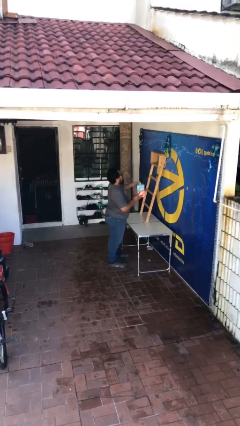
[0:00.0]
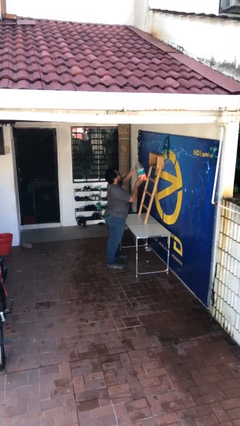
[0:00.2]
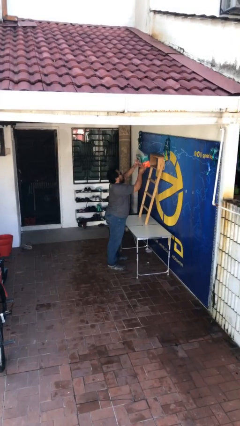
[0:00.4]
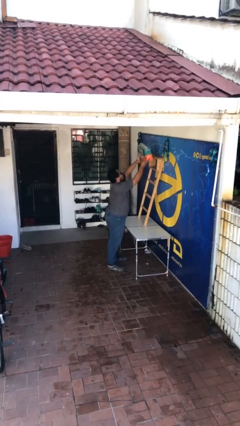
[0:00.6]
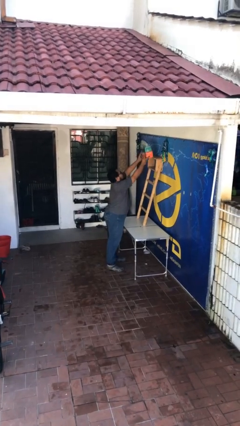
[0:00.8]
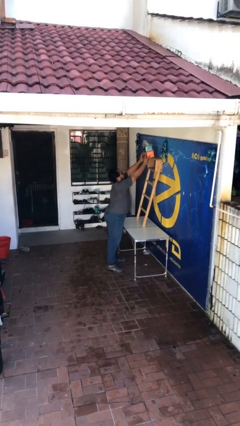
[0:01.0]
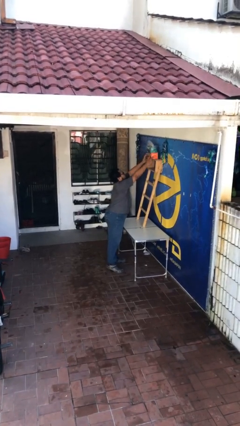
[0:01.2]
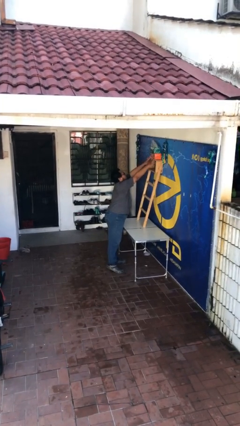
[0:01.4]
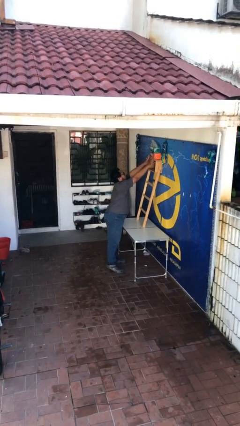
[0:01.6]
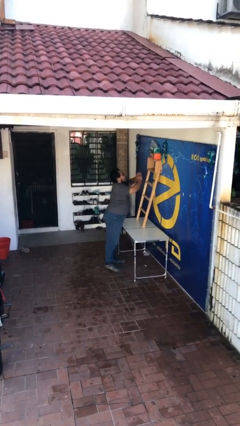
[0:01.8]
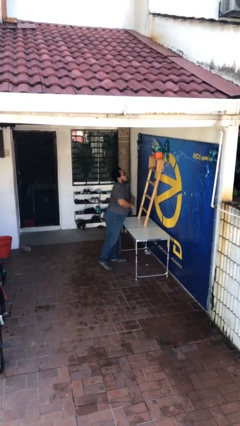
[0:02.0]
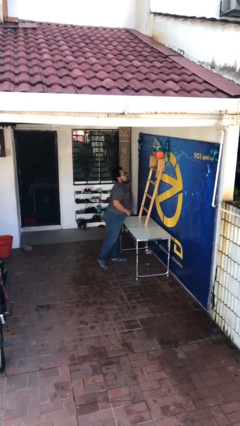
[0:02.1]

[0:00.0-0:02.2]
person puts down object on shelf

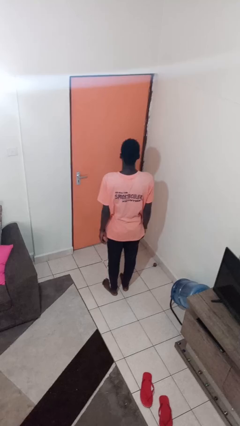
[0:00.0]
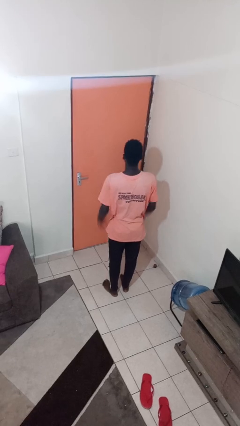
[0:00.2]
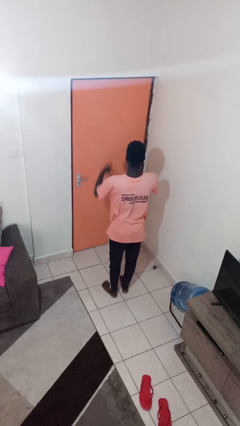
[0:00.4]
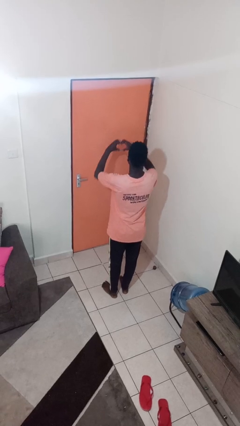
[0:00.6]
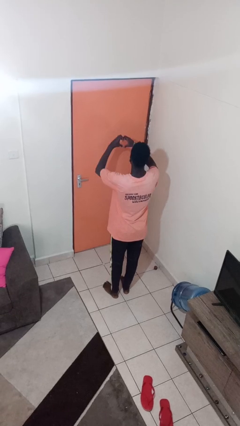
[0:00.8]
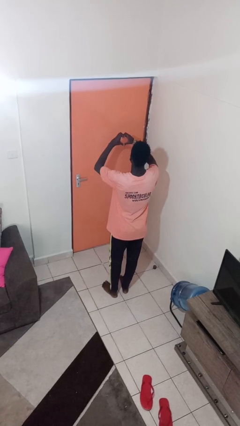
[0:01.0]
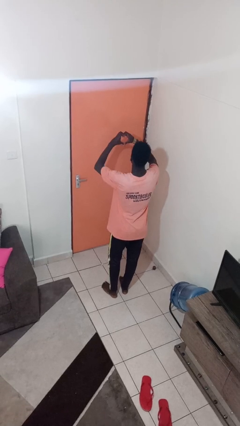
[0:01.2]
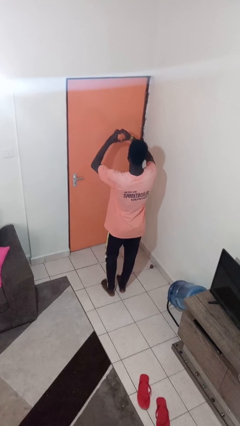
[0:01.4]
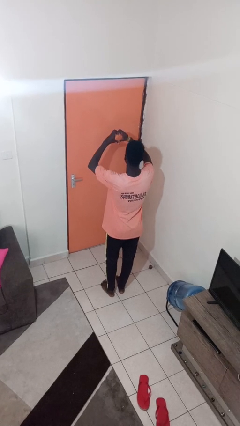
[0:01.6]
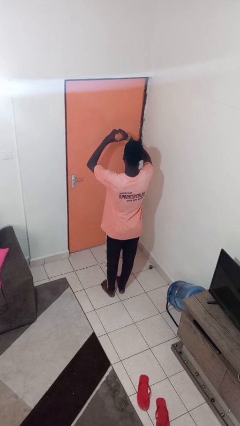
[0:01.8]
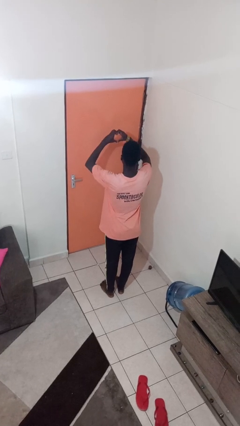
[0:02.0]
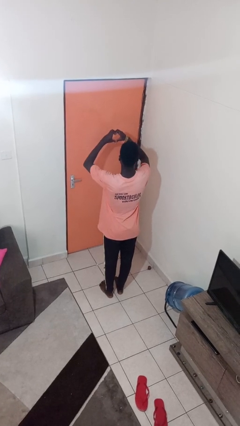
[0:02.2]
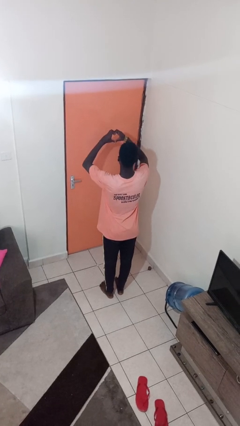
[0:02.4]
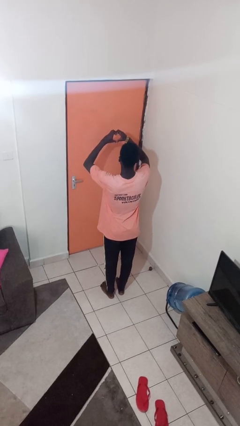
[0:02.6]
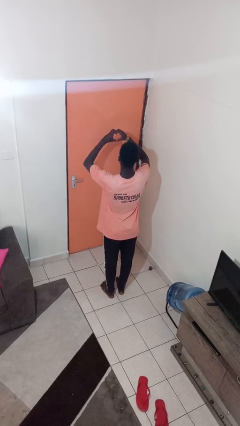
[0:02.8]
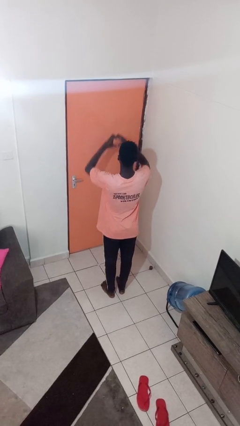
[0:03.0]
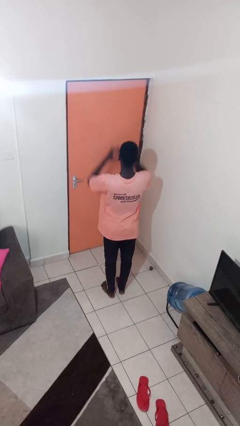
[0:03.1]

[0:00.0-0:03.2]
person gestures heart

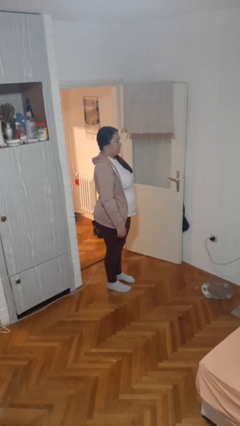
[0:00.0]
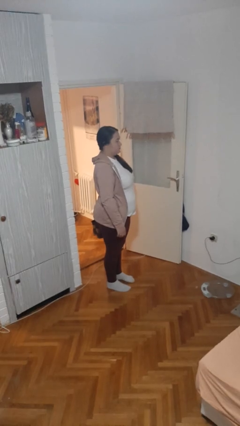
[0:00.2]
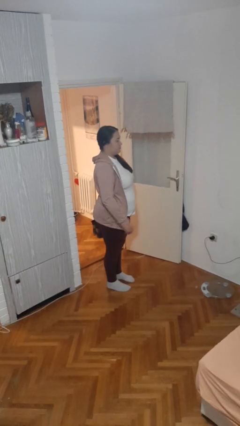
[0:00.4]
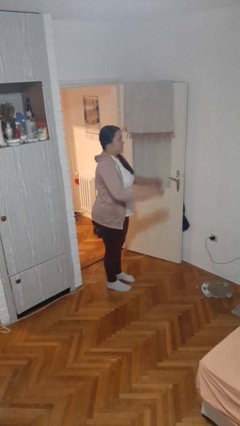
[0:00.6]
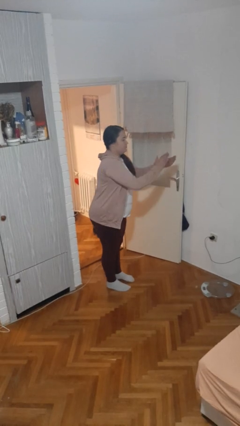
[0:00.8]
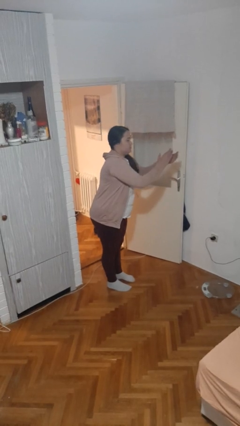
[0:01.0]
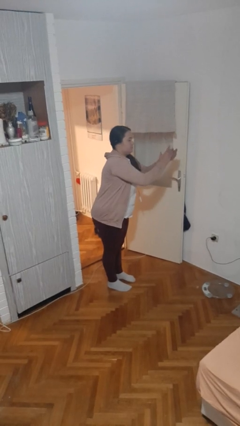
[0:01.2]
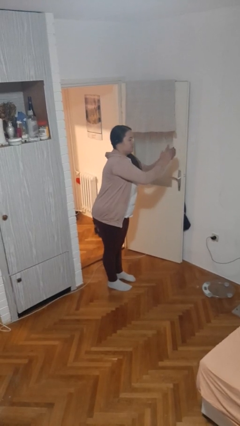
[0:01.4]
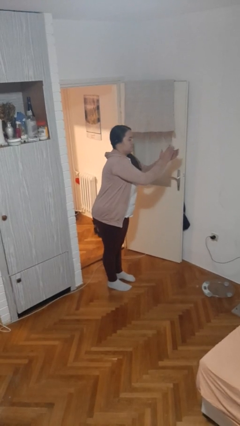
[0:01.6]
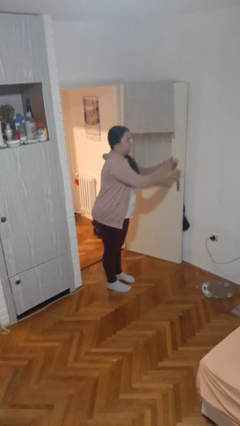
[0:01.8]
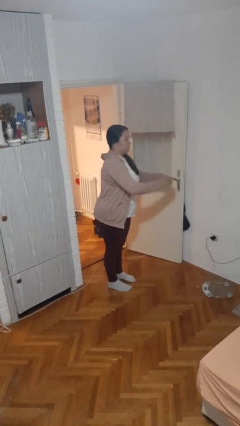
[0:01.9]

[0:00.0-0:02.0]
person claps hands

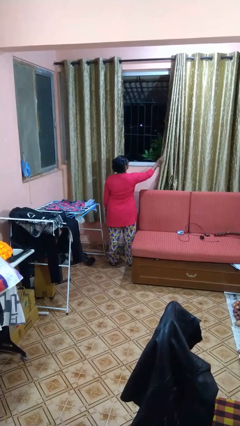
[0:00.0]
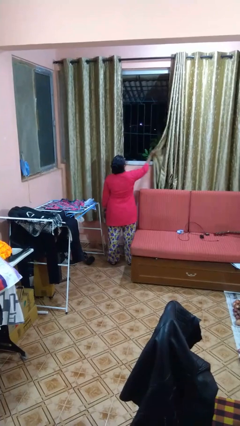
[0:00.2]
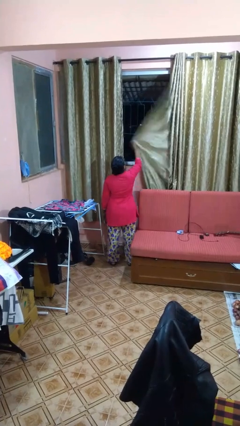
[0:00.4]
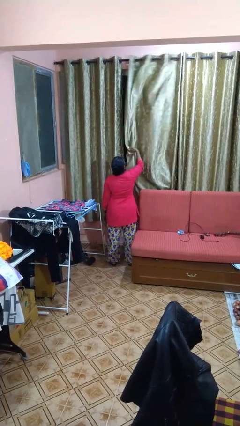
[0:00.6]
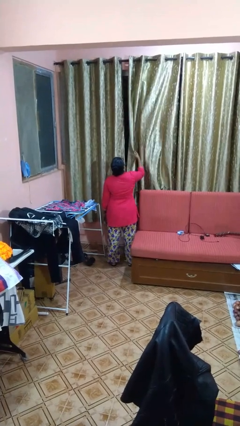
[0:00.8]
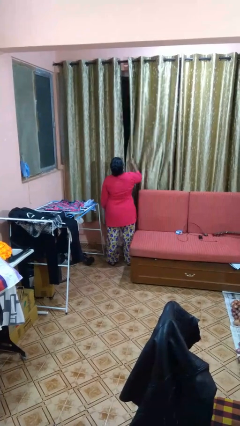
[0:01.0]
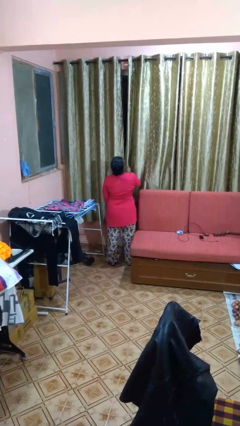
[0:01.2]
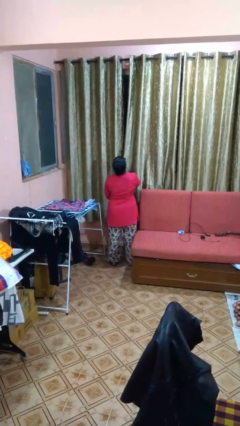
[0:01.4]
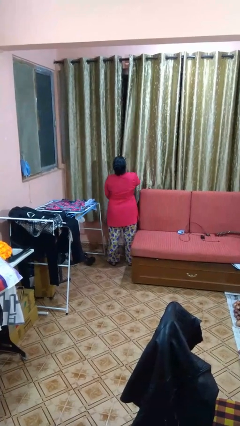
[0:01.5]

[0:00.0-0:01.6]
person closes curtains

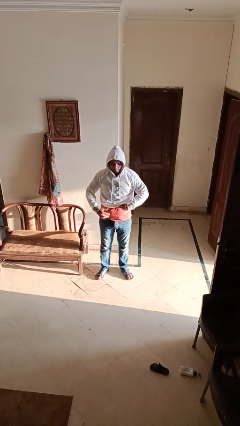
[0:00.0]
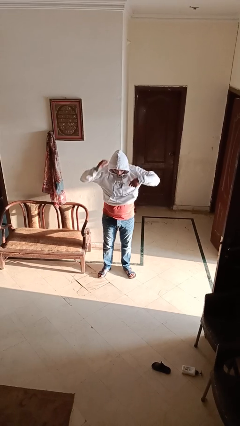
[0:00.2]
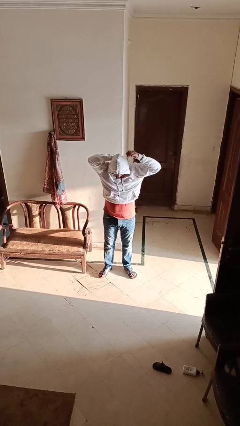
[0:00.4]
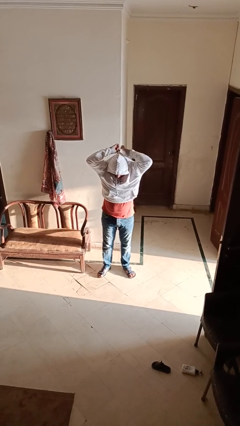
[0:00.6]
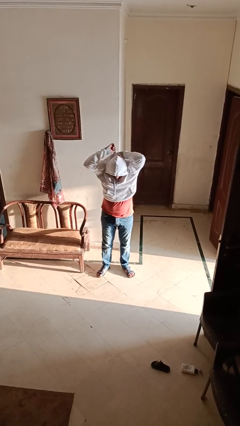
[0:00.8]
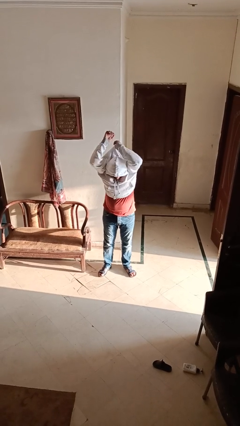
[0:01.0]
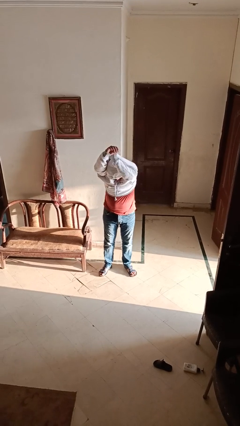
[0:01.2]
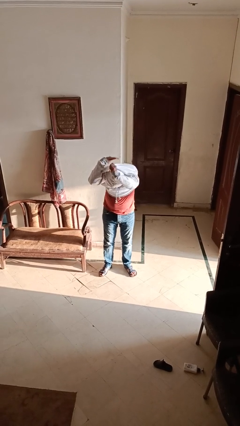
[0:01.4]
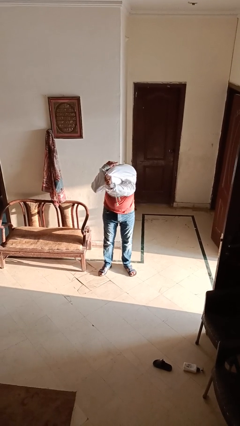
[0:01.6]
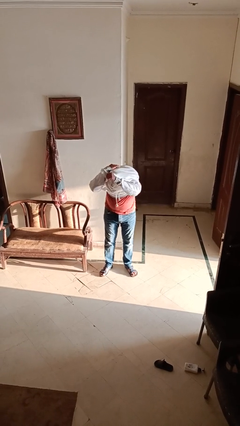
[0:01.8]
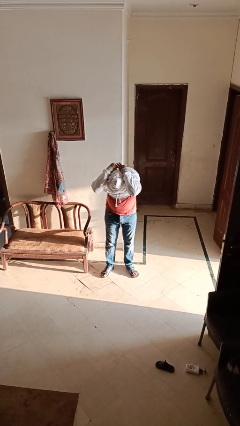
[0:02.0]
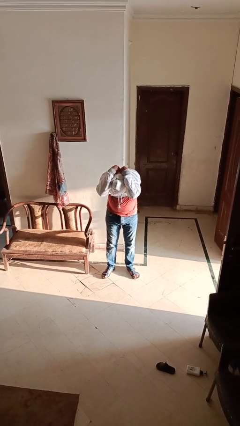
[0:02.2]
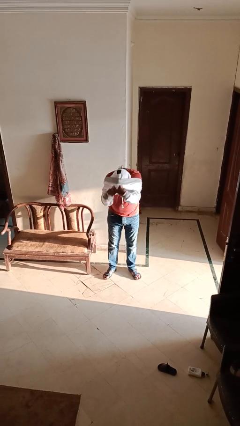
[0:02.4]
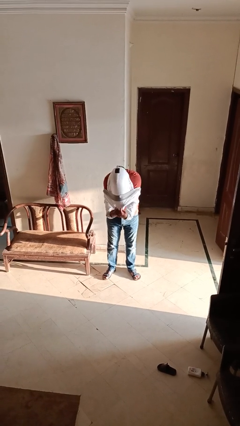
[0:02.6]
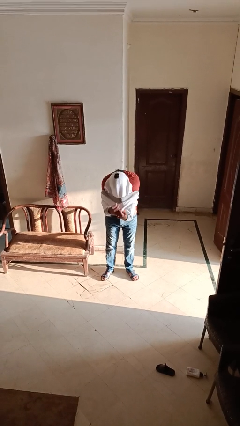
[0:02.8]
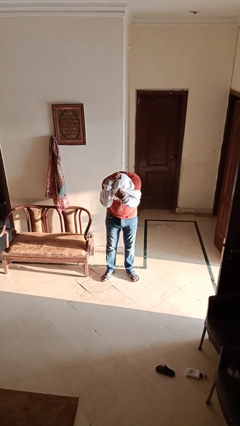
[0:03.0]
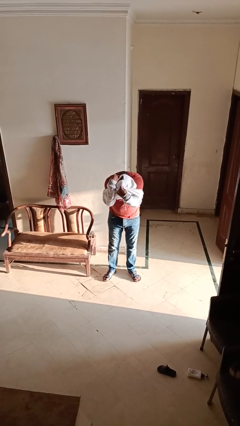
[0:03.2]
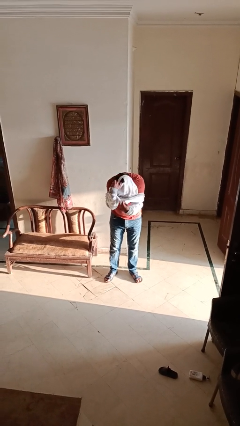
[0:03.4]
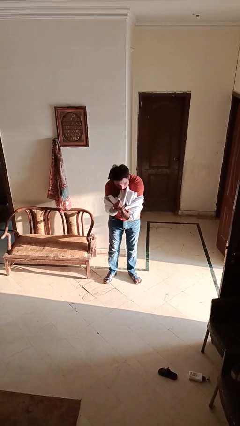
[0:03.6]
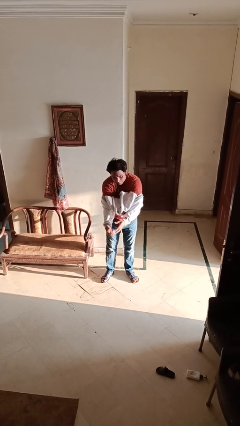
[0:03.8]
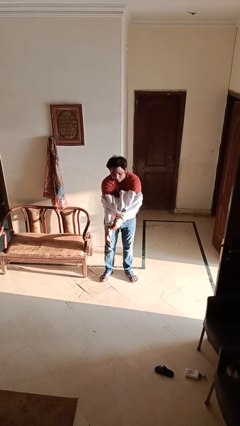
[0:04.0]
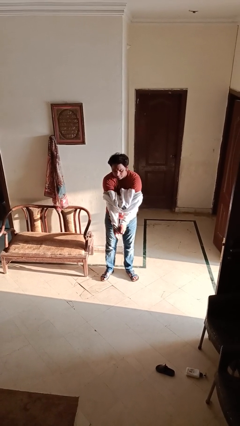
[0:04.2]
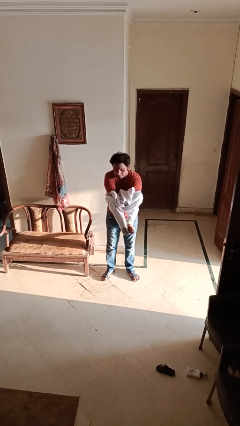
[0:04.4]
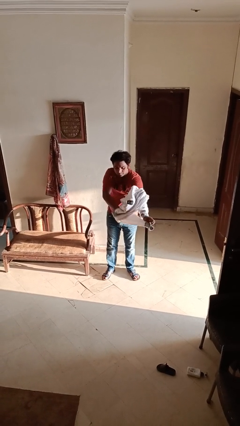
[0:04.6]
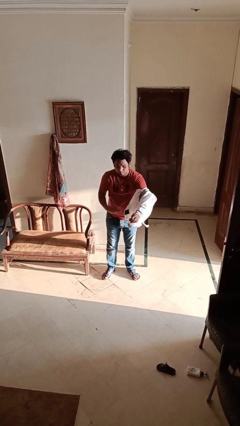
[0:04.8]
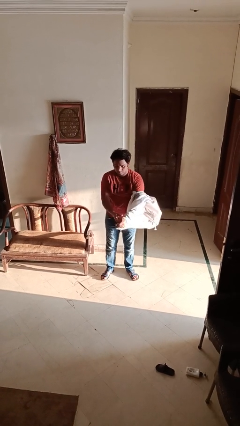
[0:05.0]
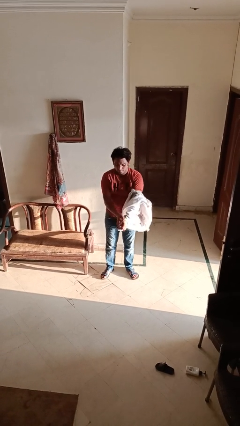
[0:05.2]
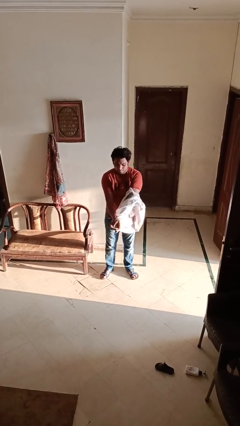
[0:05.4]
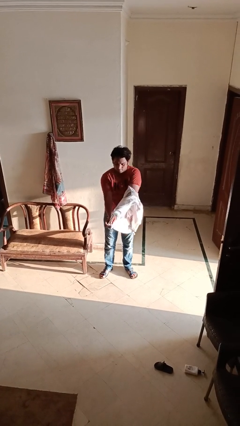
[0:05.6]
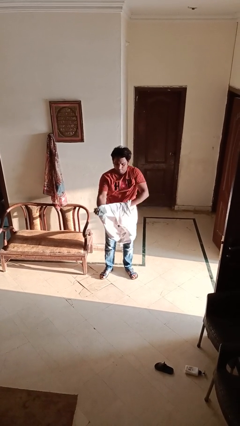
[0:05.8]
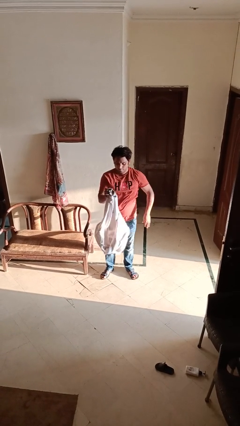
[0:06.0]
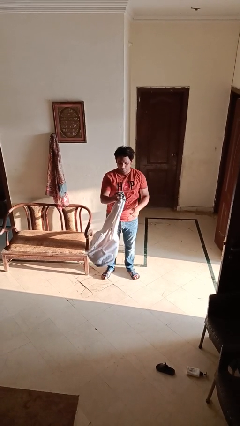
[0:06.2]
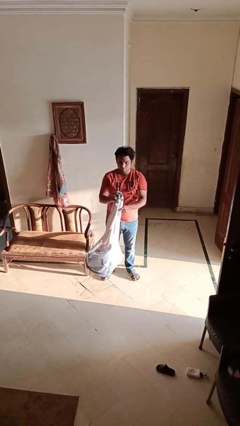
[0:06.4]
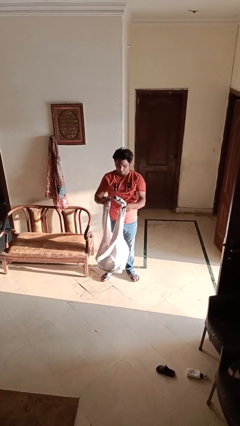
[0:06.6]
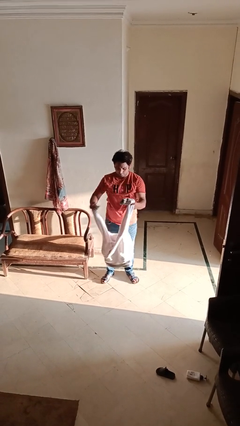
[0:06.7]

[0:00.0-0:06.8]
person takes off hoodie

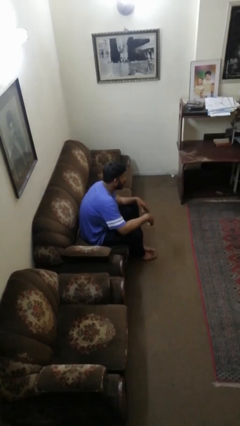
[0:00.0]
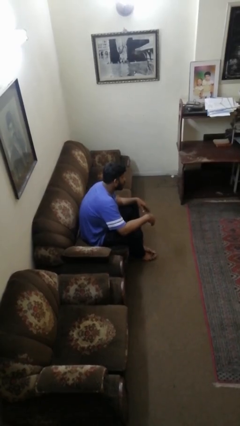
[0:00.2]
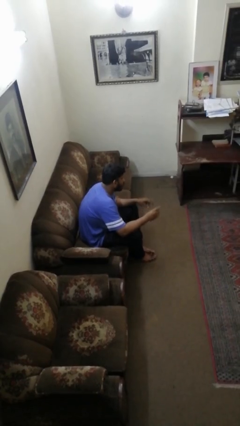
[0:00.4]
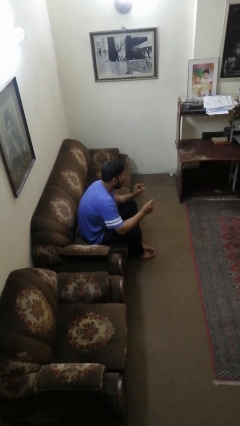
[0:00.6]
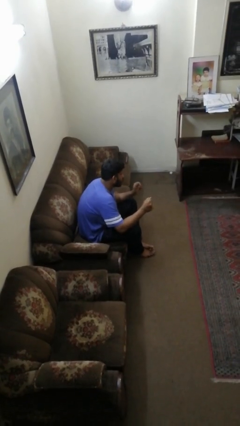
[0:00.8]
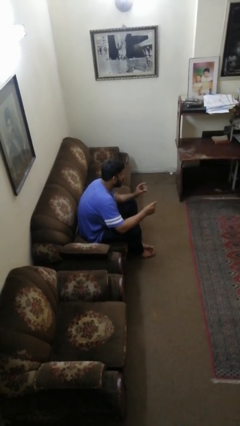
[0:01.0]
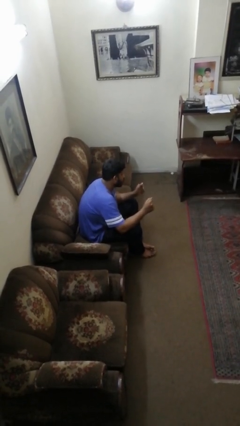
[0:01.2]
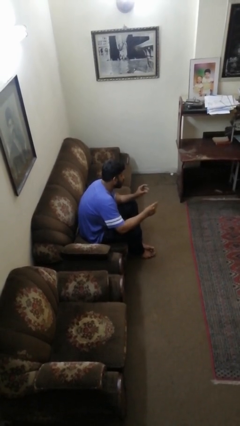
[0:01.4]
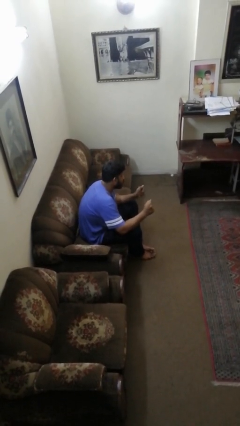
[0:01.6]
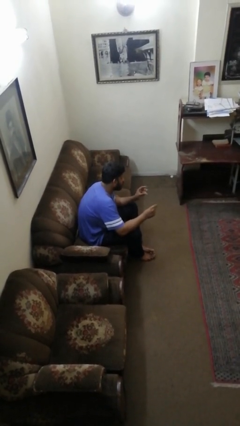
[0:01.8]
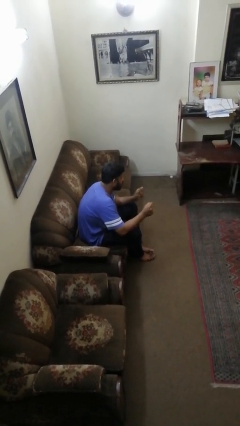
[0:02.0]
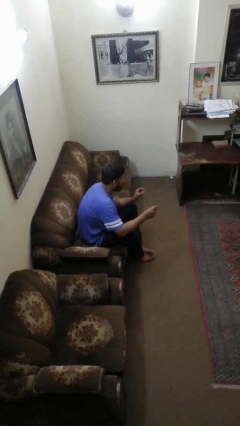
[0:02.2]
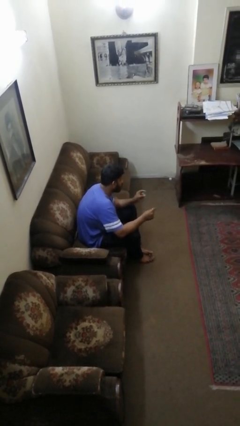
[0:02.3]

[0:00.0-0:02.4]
person snaps fingers
